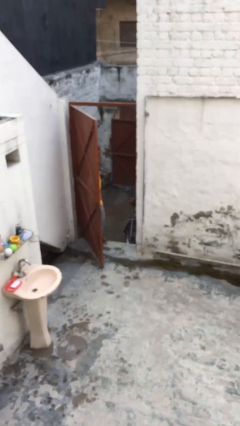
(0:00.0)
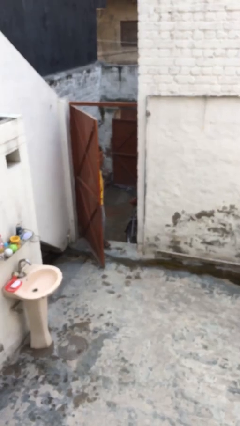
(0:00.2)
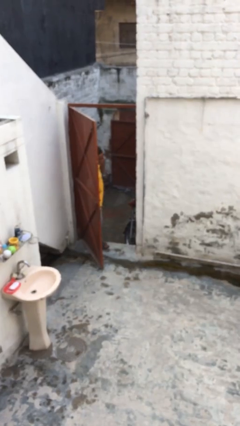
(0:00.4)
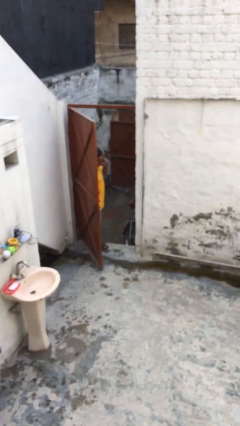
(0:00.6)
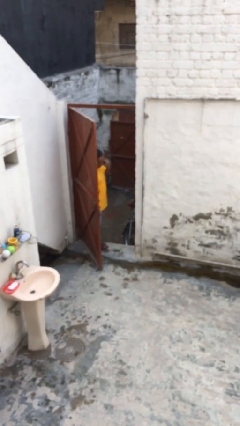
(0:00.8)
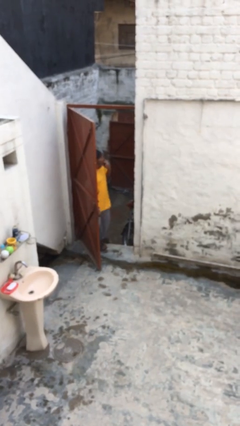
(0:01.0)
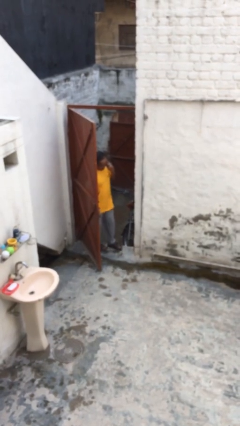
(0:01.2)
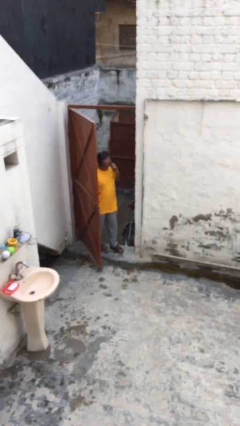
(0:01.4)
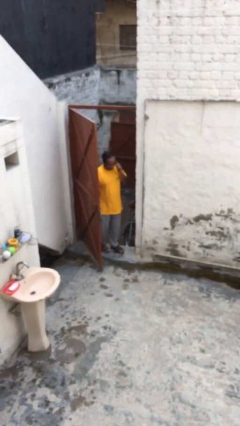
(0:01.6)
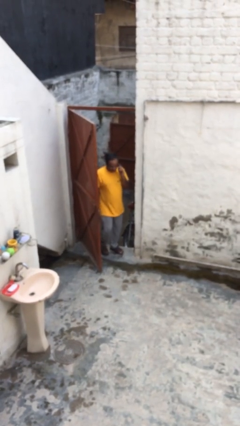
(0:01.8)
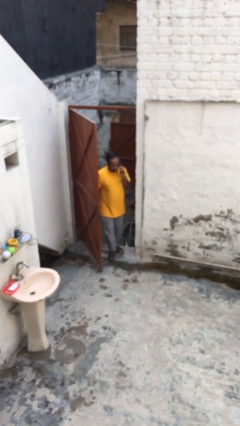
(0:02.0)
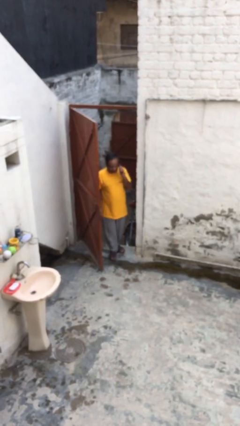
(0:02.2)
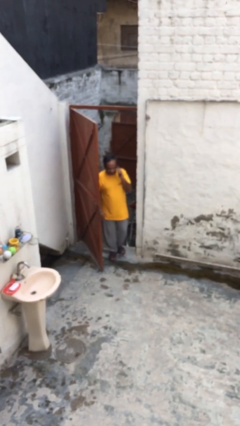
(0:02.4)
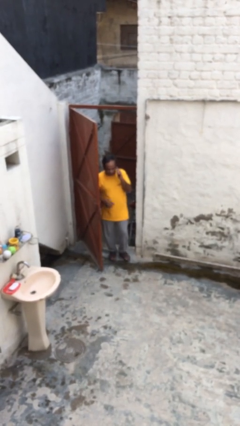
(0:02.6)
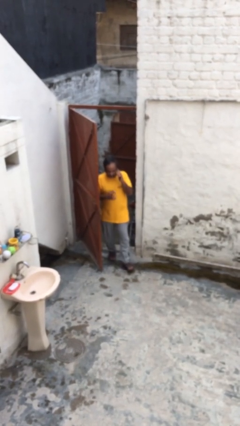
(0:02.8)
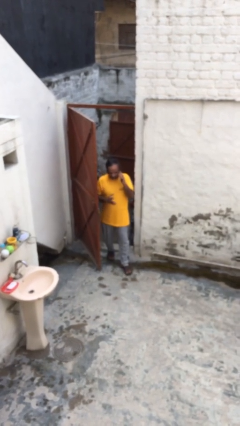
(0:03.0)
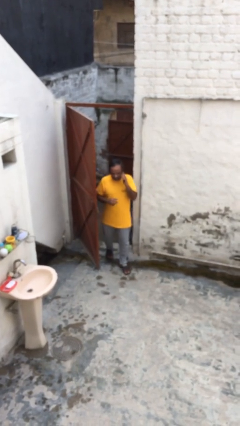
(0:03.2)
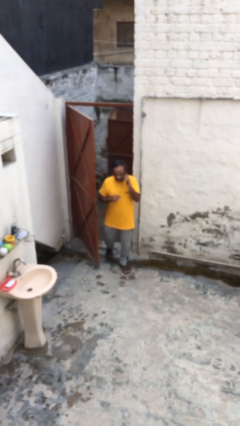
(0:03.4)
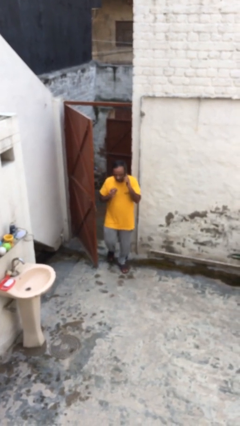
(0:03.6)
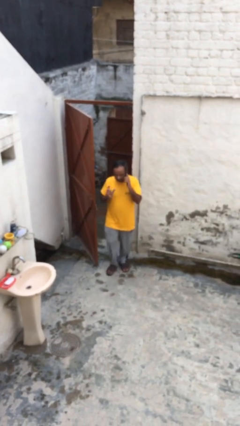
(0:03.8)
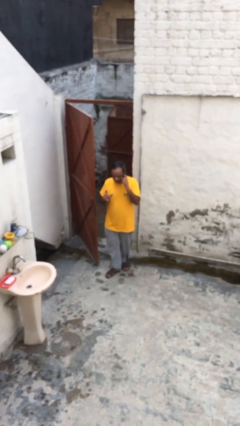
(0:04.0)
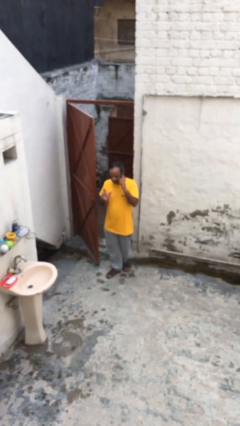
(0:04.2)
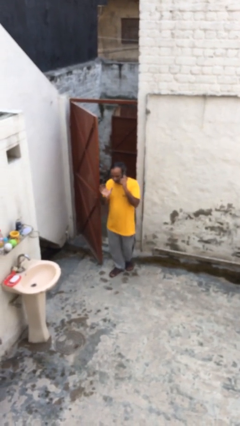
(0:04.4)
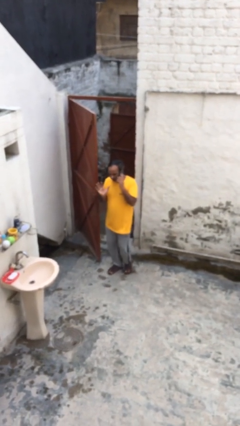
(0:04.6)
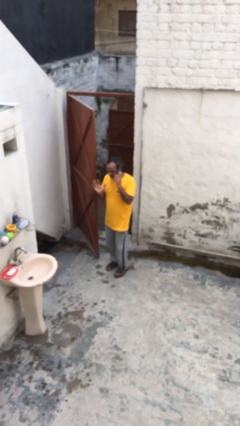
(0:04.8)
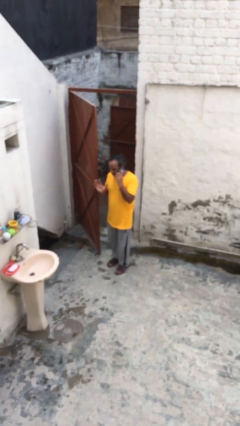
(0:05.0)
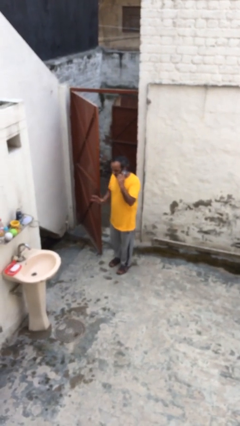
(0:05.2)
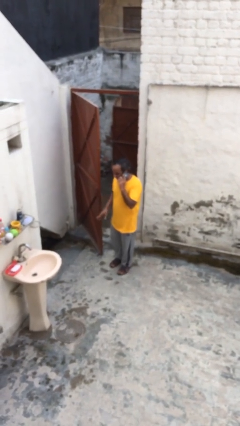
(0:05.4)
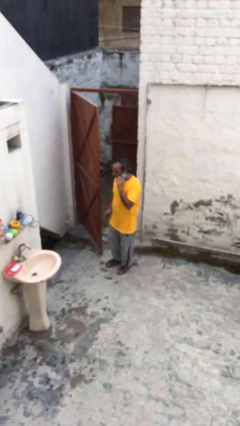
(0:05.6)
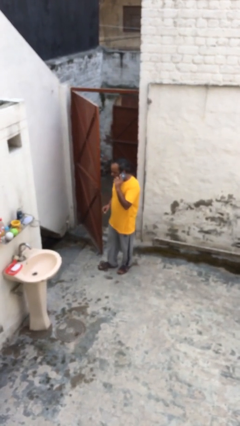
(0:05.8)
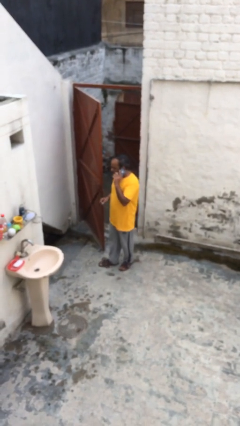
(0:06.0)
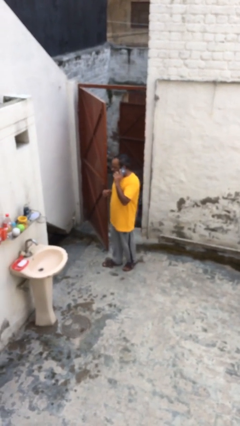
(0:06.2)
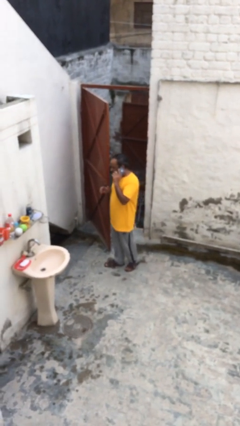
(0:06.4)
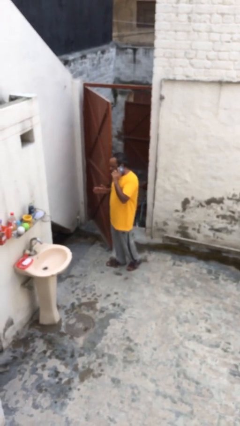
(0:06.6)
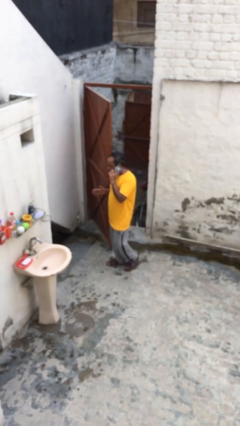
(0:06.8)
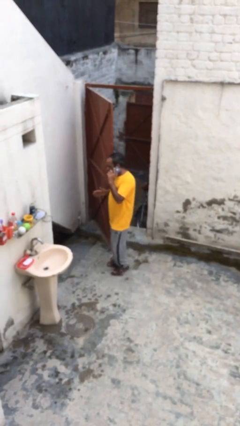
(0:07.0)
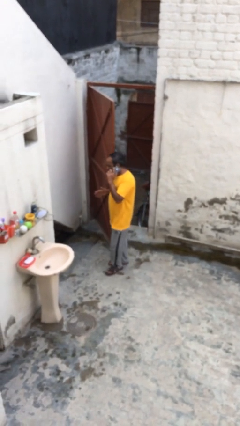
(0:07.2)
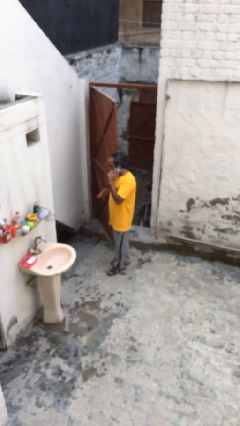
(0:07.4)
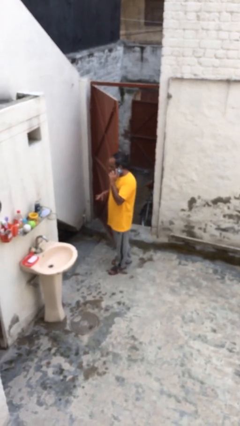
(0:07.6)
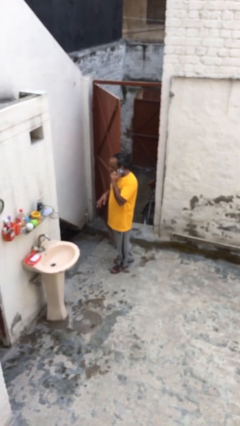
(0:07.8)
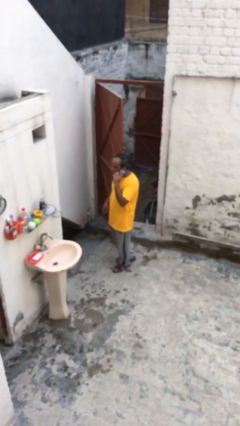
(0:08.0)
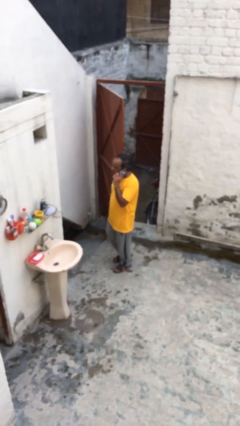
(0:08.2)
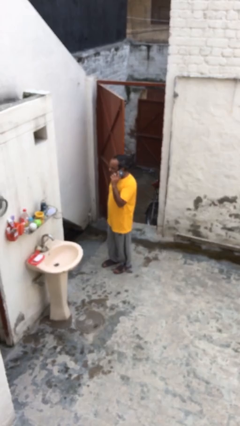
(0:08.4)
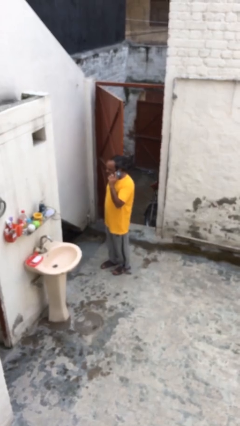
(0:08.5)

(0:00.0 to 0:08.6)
person enters scene through structure

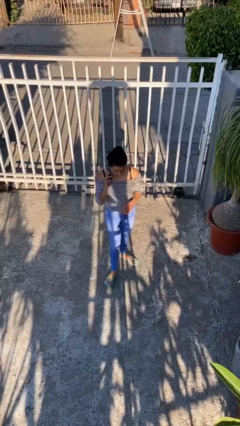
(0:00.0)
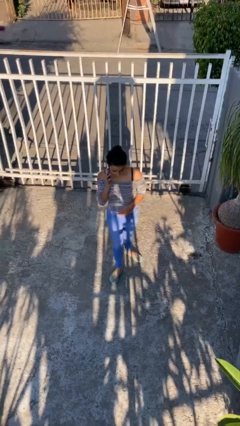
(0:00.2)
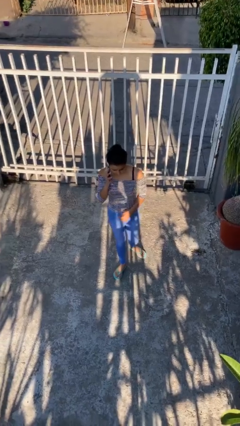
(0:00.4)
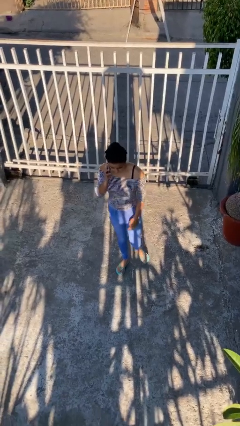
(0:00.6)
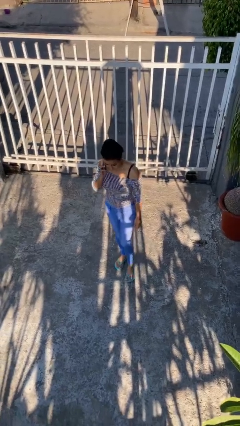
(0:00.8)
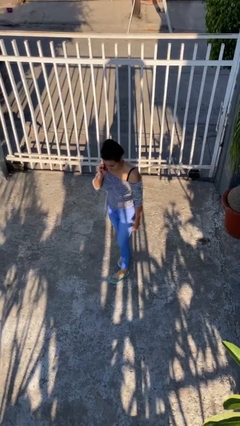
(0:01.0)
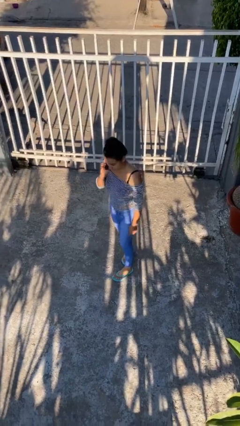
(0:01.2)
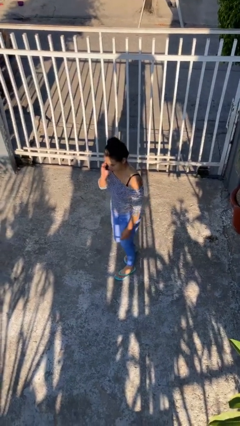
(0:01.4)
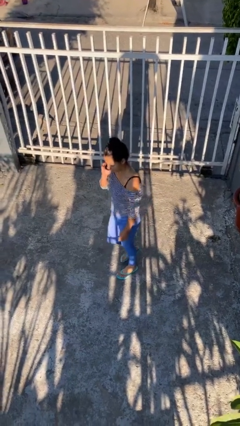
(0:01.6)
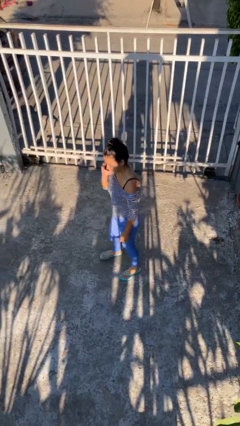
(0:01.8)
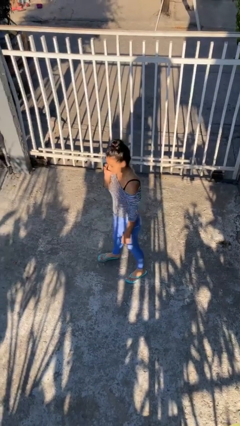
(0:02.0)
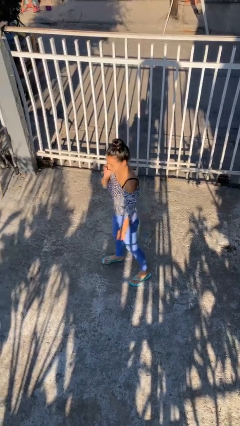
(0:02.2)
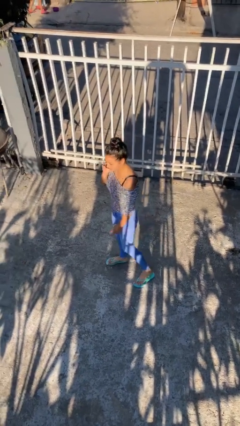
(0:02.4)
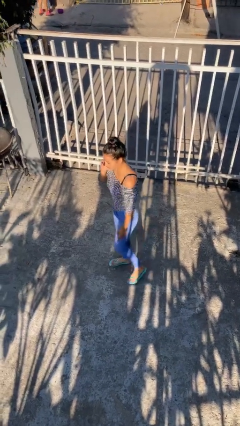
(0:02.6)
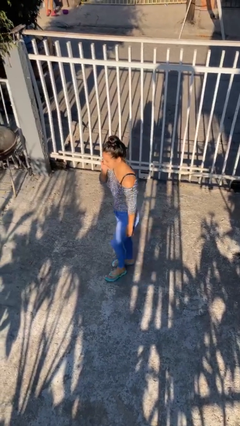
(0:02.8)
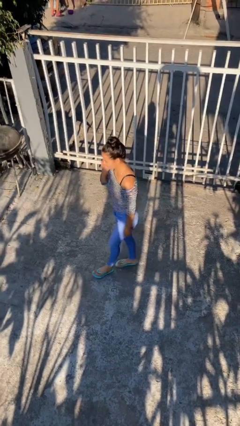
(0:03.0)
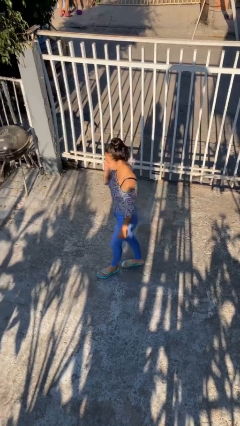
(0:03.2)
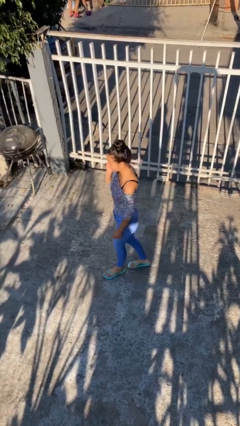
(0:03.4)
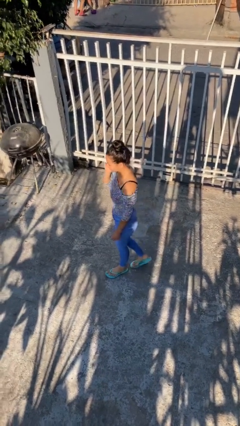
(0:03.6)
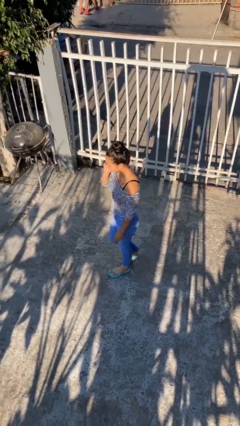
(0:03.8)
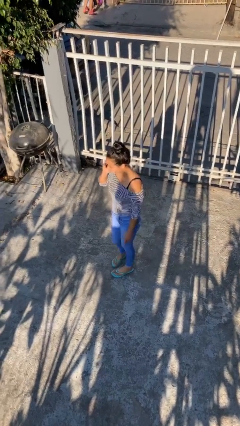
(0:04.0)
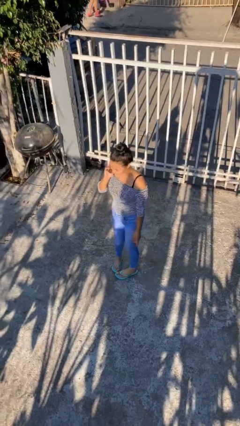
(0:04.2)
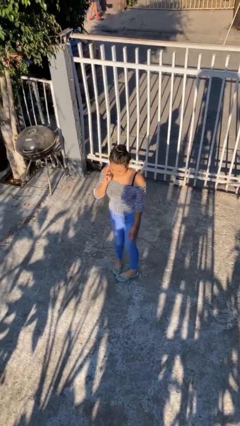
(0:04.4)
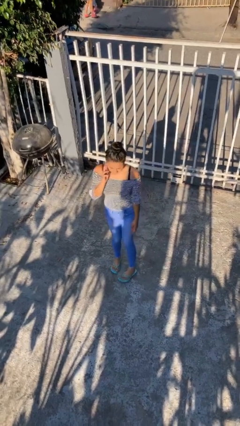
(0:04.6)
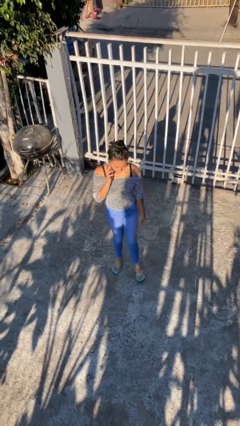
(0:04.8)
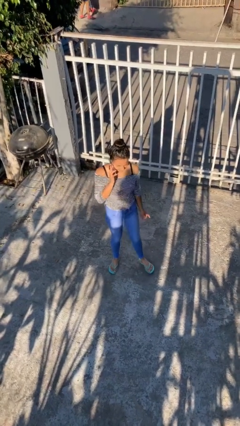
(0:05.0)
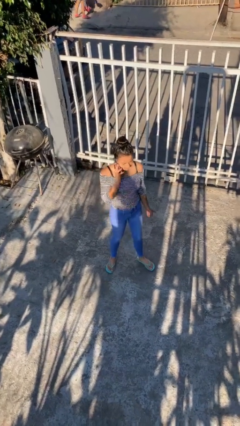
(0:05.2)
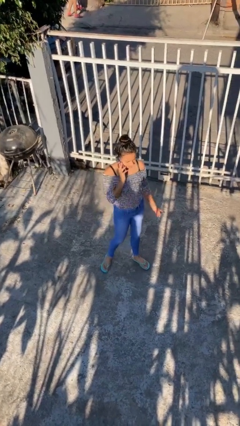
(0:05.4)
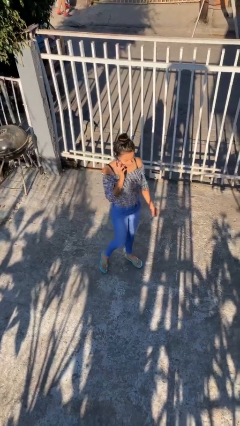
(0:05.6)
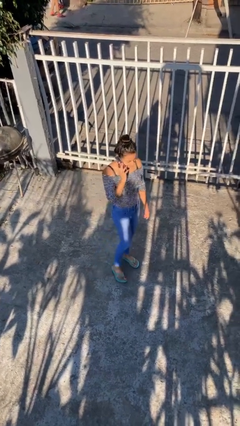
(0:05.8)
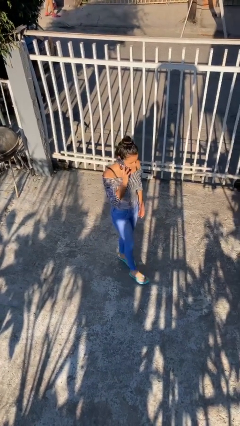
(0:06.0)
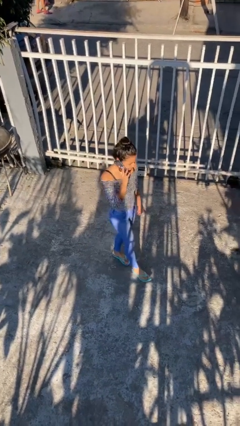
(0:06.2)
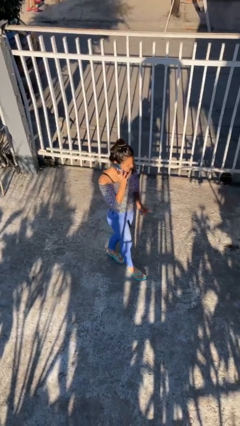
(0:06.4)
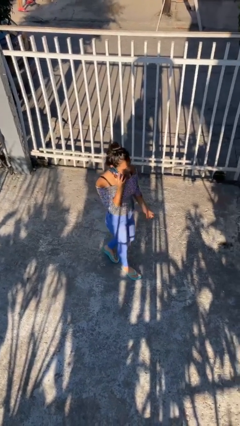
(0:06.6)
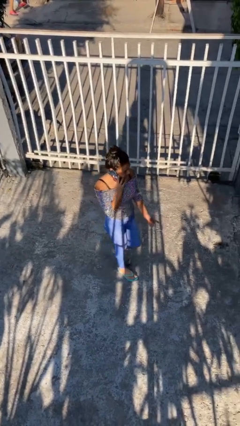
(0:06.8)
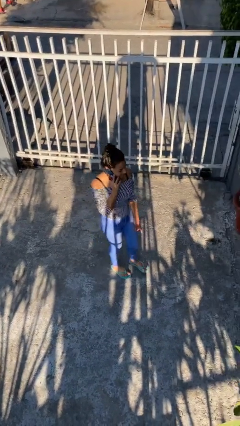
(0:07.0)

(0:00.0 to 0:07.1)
person talks on phone

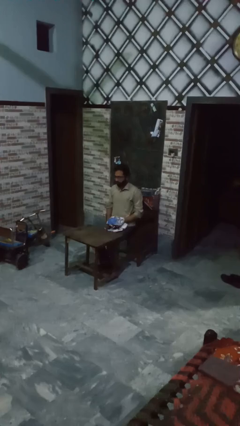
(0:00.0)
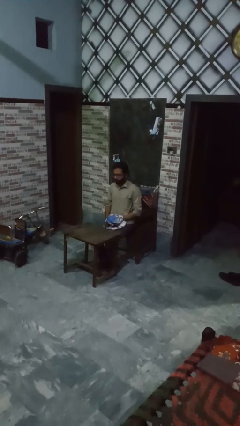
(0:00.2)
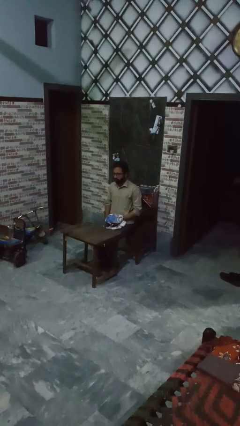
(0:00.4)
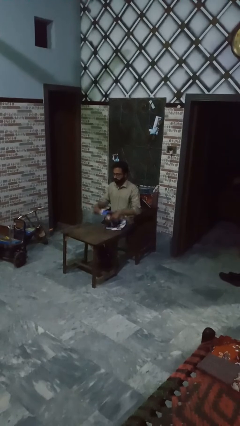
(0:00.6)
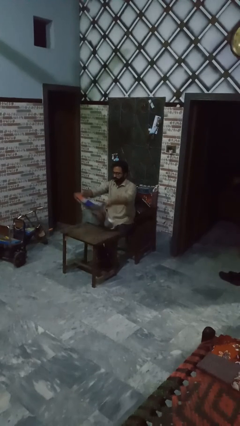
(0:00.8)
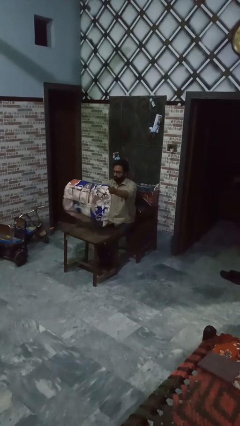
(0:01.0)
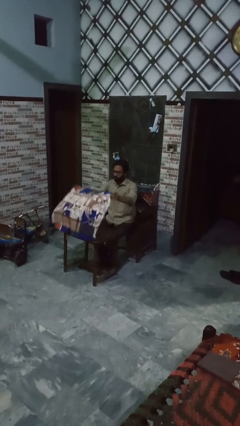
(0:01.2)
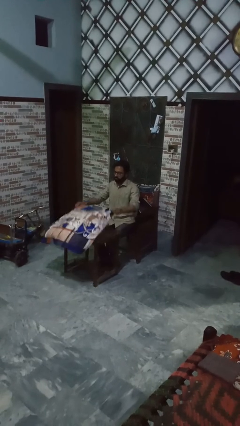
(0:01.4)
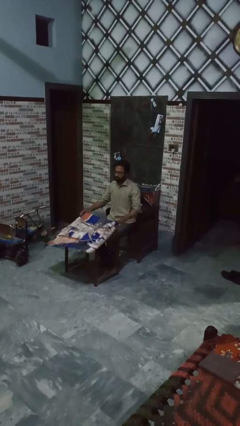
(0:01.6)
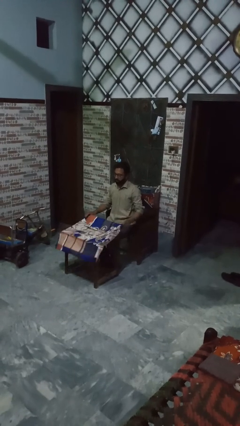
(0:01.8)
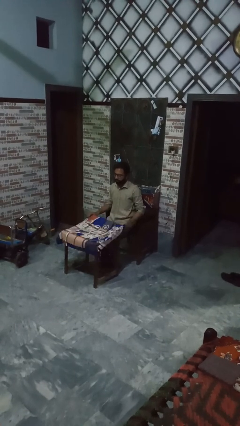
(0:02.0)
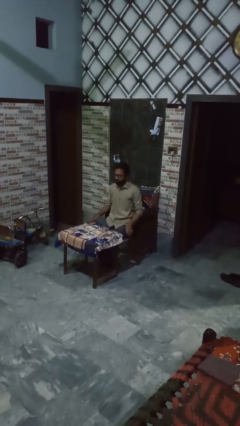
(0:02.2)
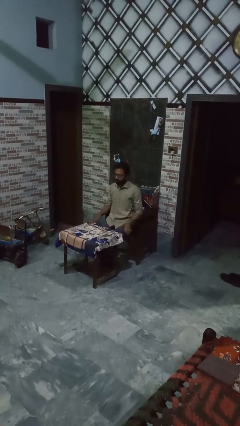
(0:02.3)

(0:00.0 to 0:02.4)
person folds tablecloth

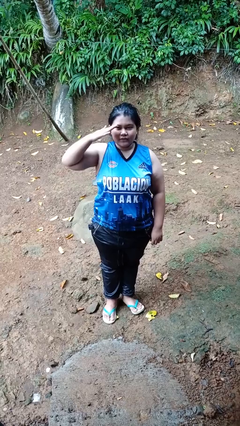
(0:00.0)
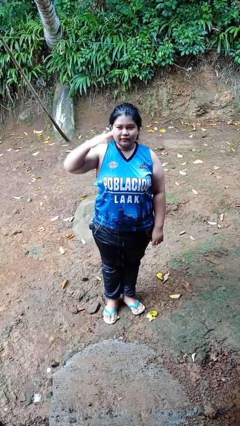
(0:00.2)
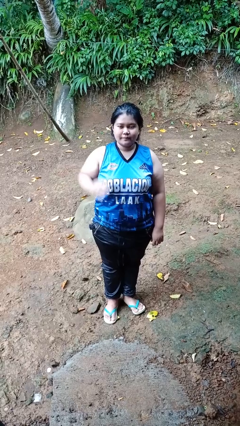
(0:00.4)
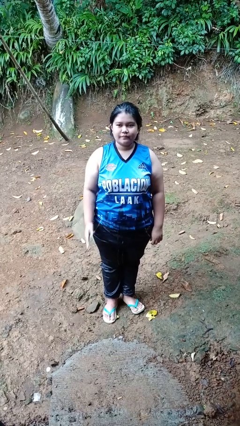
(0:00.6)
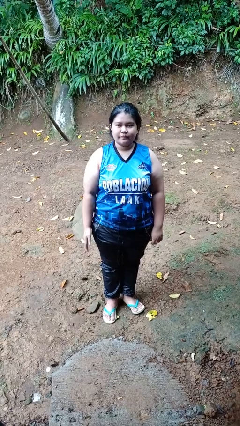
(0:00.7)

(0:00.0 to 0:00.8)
person salutes
